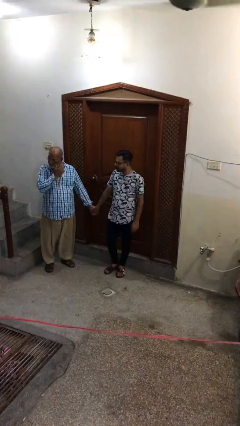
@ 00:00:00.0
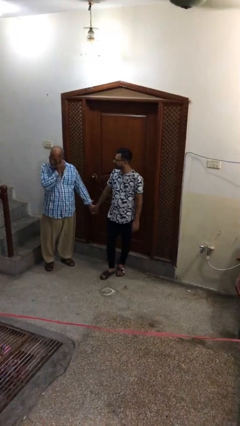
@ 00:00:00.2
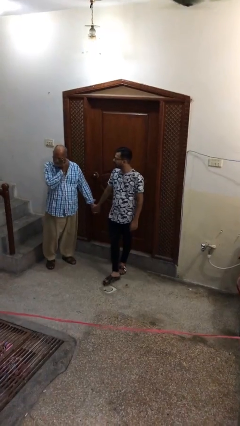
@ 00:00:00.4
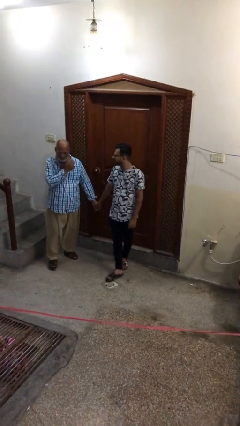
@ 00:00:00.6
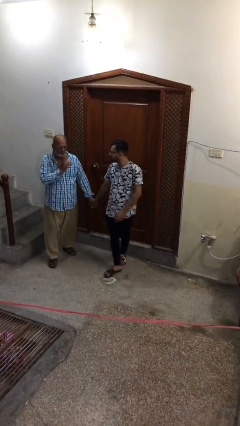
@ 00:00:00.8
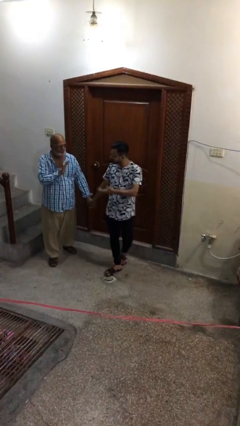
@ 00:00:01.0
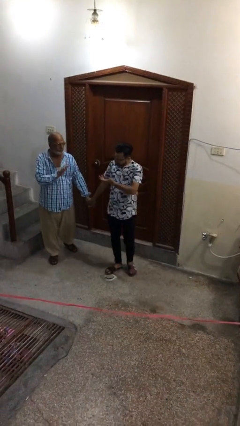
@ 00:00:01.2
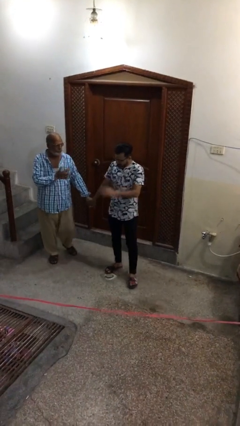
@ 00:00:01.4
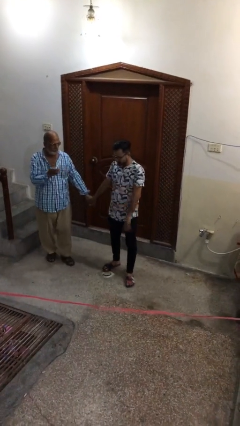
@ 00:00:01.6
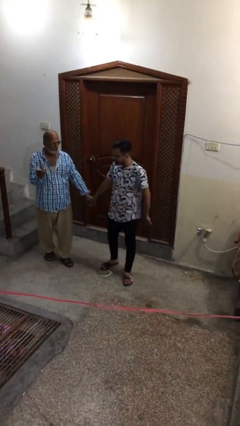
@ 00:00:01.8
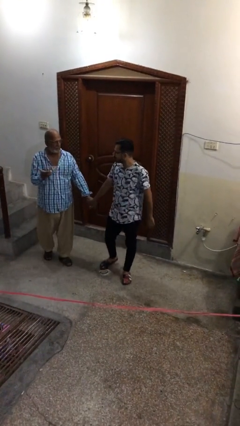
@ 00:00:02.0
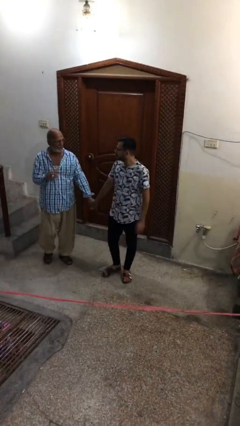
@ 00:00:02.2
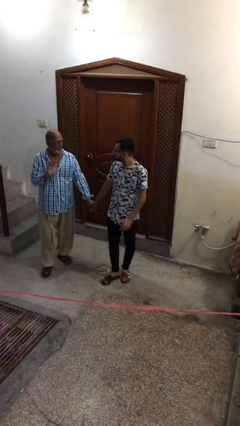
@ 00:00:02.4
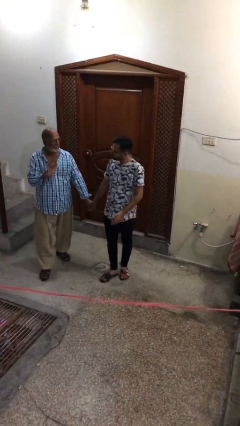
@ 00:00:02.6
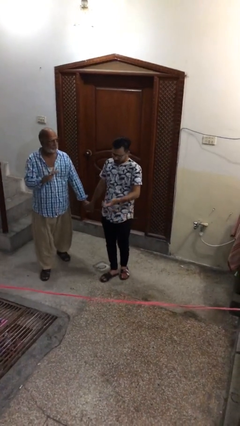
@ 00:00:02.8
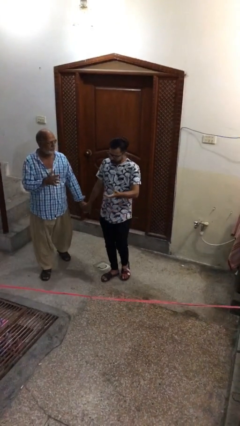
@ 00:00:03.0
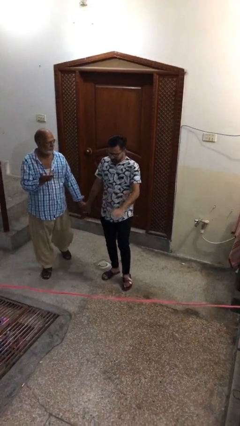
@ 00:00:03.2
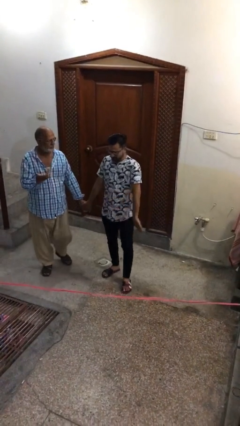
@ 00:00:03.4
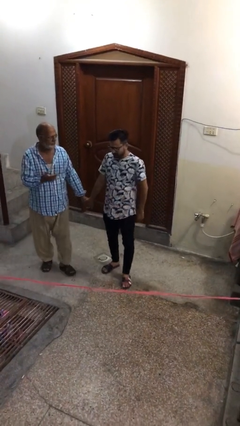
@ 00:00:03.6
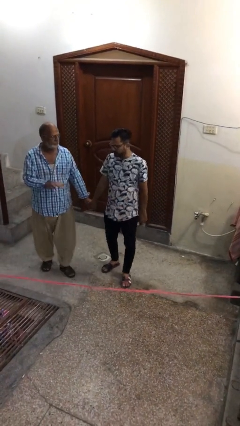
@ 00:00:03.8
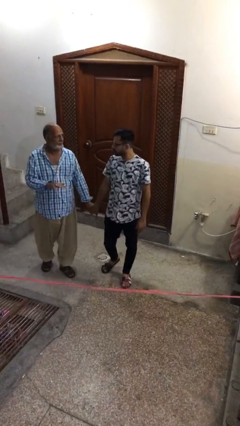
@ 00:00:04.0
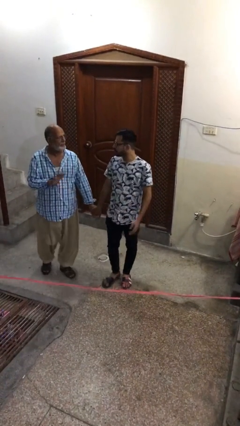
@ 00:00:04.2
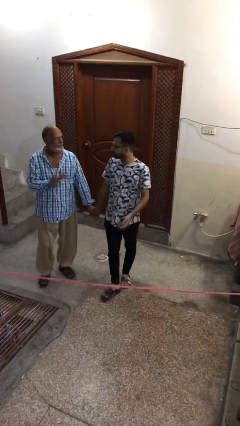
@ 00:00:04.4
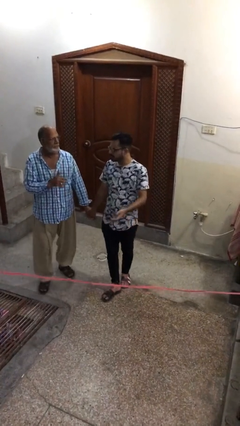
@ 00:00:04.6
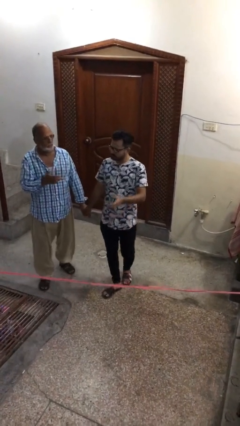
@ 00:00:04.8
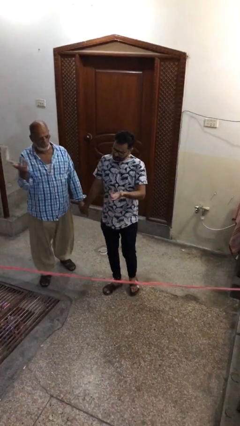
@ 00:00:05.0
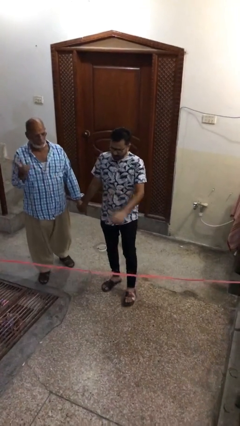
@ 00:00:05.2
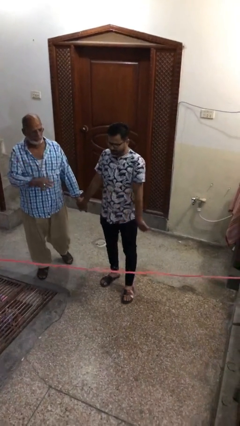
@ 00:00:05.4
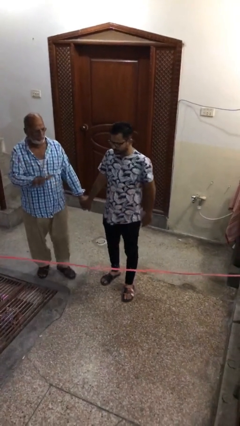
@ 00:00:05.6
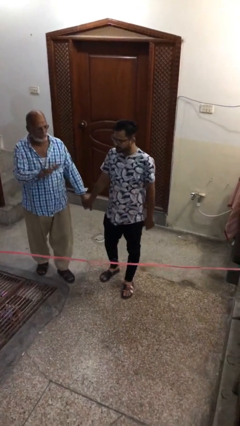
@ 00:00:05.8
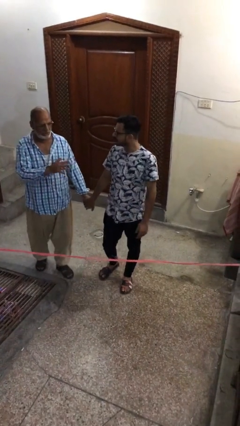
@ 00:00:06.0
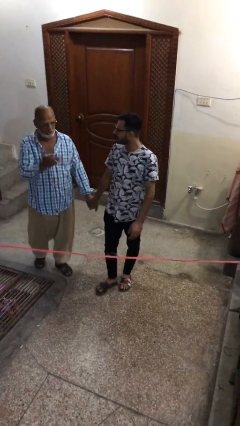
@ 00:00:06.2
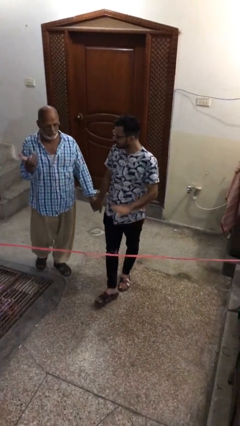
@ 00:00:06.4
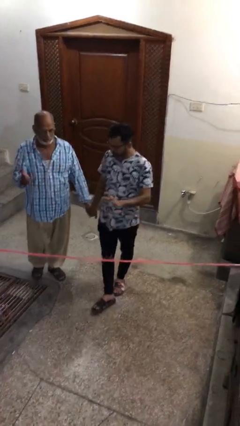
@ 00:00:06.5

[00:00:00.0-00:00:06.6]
person holds hand

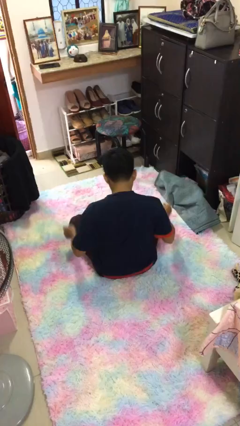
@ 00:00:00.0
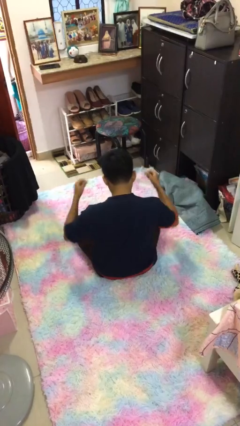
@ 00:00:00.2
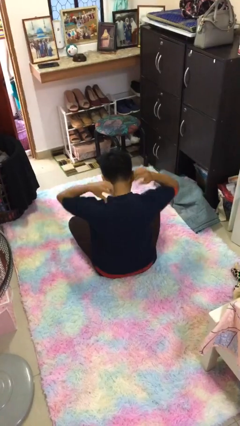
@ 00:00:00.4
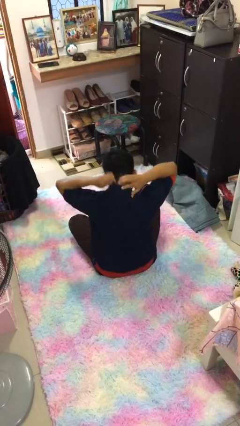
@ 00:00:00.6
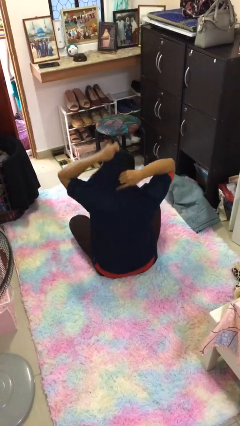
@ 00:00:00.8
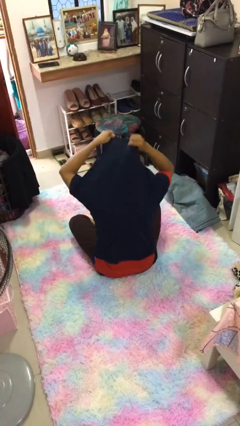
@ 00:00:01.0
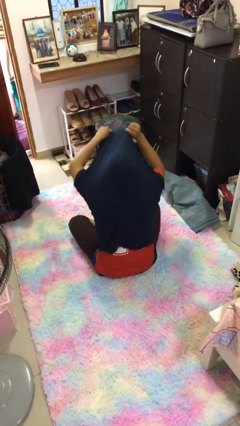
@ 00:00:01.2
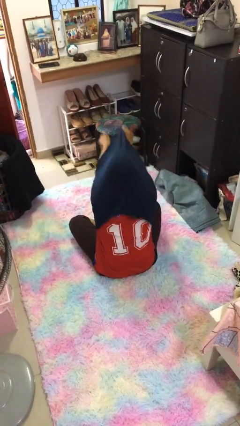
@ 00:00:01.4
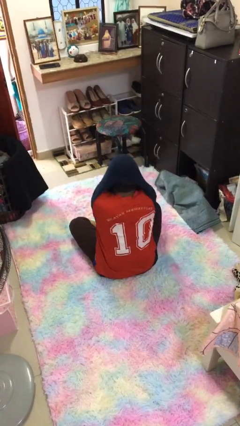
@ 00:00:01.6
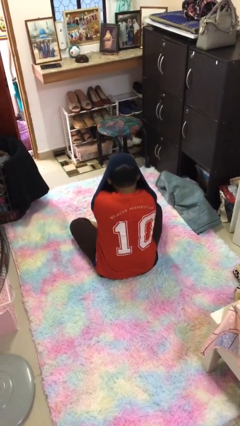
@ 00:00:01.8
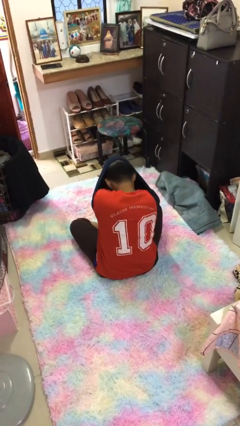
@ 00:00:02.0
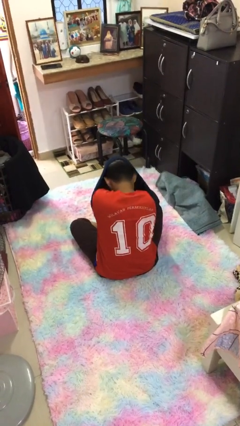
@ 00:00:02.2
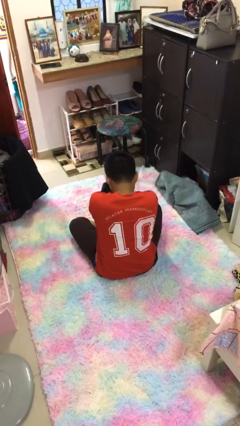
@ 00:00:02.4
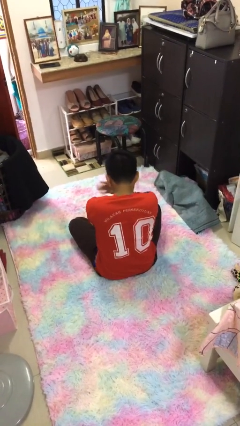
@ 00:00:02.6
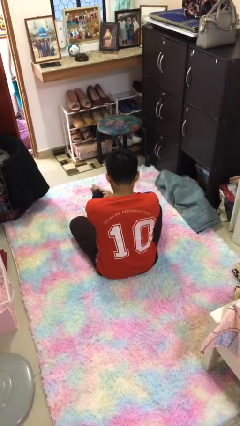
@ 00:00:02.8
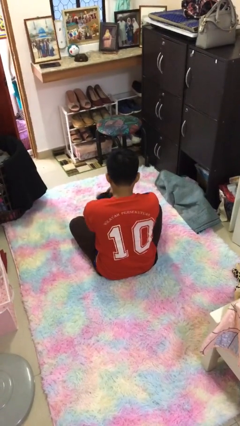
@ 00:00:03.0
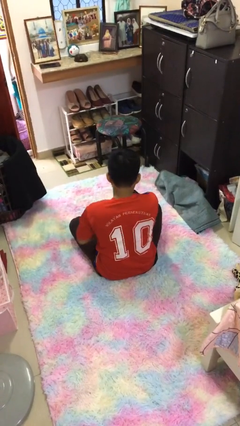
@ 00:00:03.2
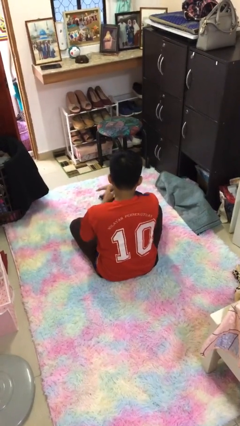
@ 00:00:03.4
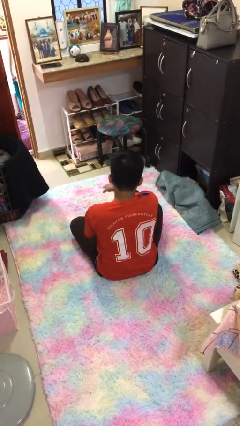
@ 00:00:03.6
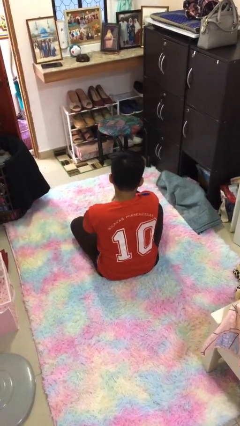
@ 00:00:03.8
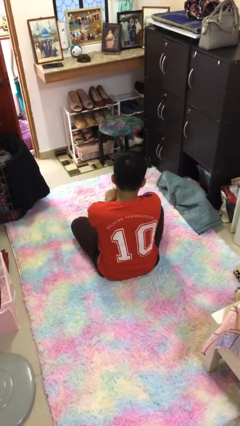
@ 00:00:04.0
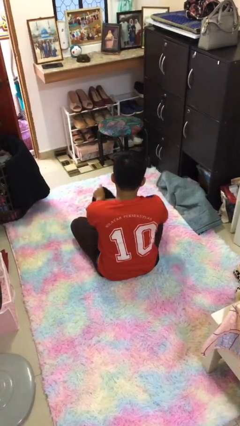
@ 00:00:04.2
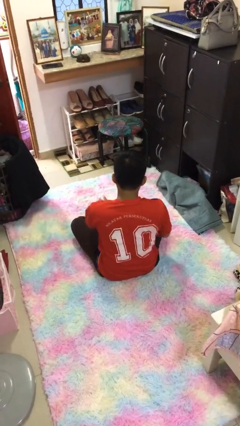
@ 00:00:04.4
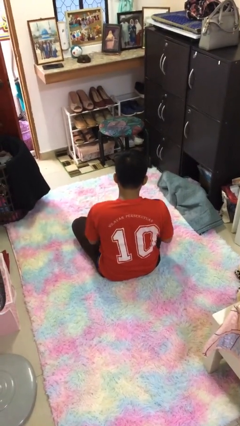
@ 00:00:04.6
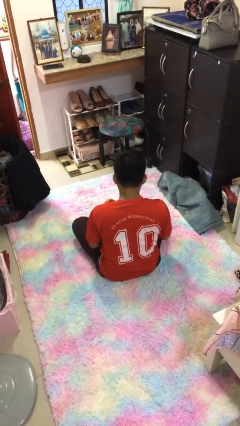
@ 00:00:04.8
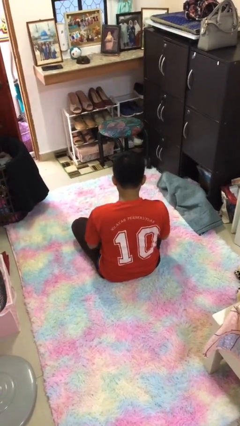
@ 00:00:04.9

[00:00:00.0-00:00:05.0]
person takes off shirt

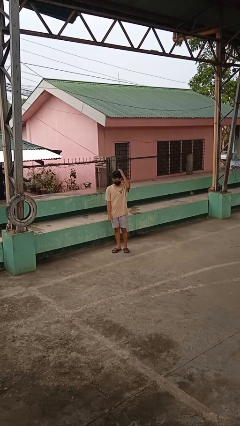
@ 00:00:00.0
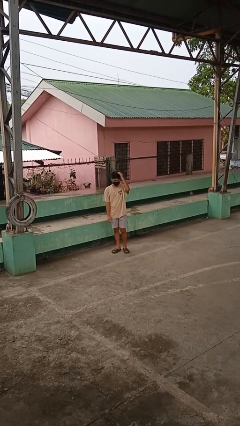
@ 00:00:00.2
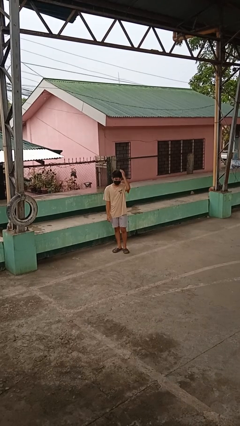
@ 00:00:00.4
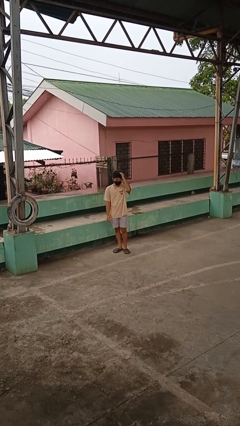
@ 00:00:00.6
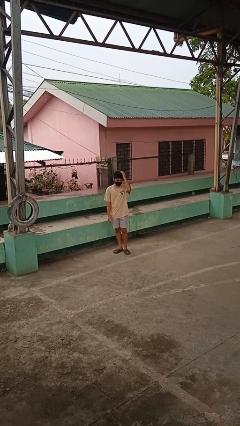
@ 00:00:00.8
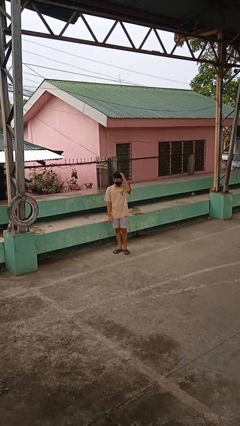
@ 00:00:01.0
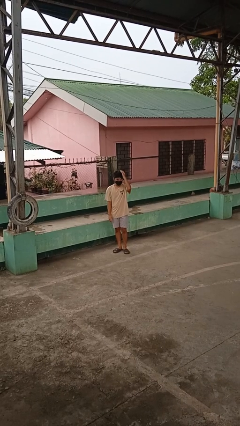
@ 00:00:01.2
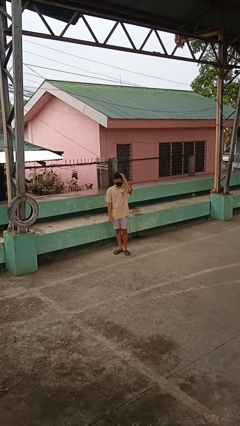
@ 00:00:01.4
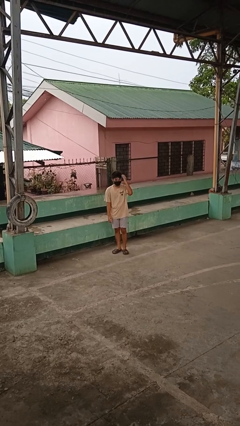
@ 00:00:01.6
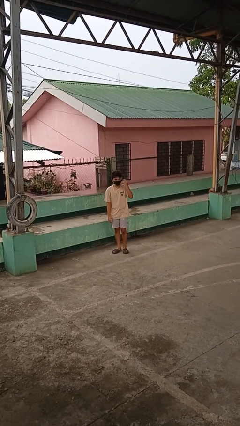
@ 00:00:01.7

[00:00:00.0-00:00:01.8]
person pats head

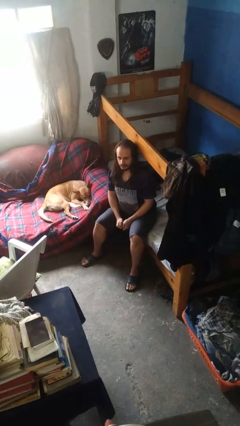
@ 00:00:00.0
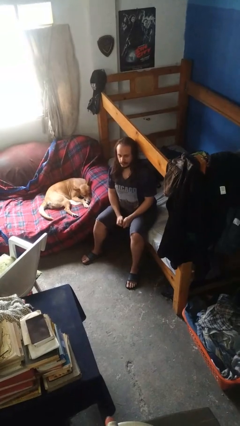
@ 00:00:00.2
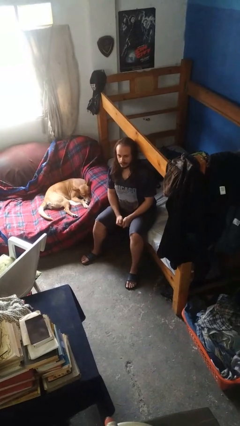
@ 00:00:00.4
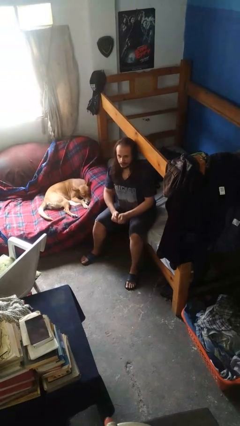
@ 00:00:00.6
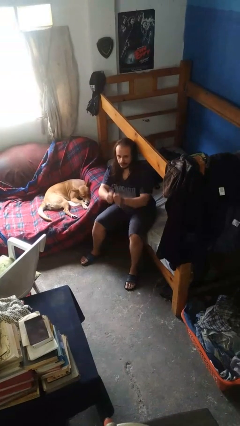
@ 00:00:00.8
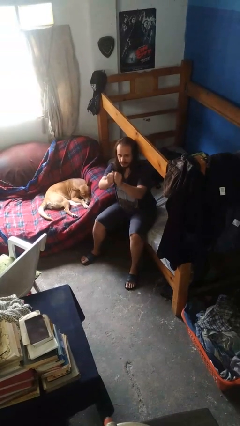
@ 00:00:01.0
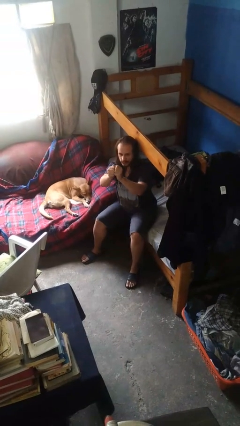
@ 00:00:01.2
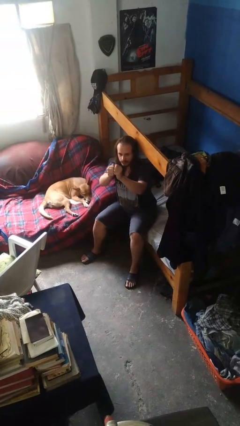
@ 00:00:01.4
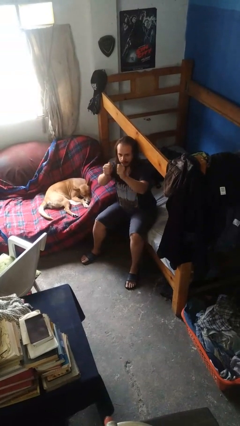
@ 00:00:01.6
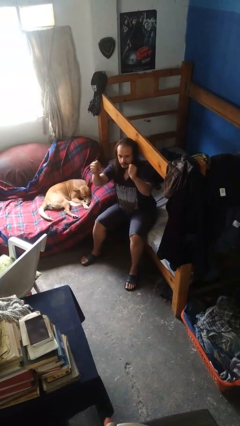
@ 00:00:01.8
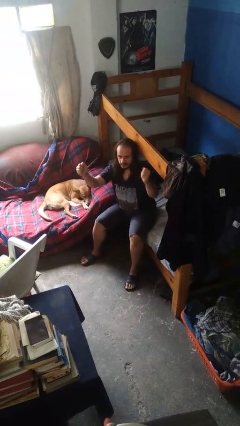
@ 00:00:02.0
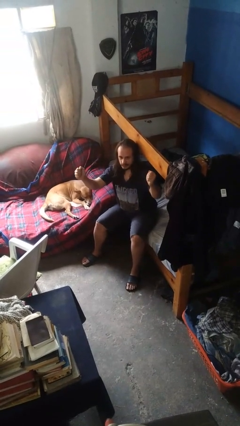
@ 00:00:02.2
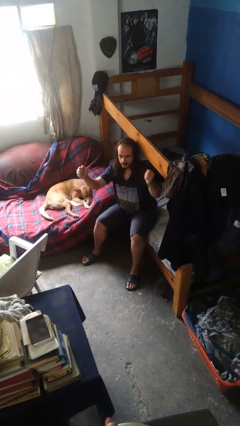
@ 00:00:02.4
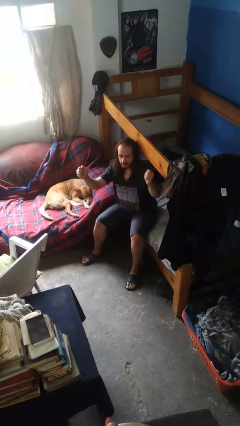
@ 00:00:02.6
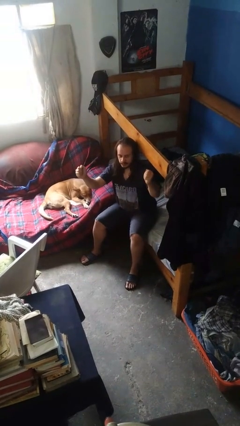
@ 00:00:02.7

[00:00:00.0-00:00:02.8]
person gestures zoom in

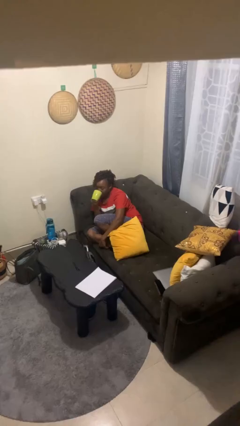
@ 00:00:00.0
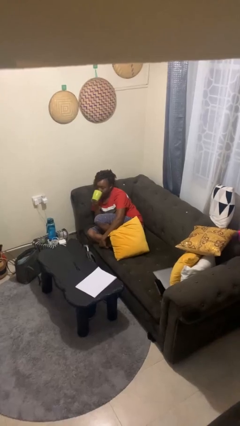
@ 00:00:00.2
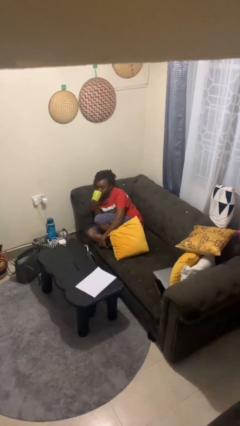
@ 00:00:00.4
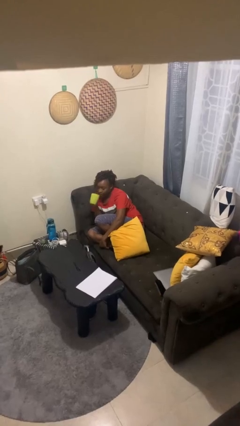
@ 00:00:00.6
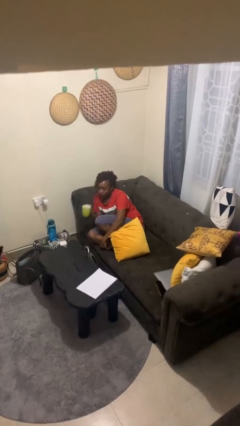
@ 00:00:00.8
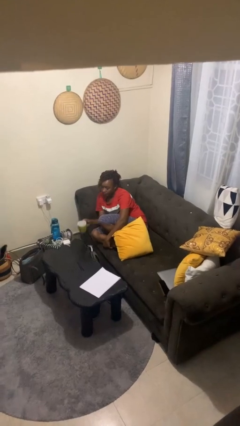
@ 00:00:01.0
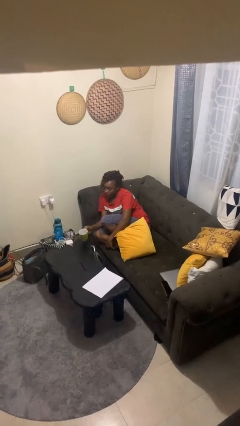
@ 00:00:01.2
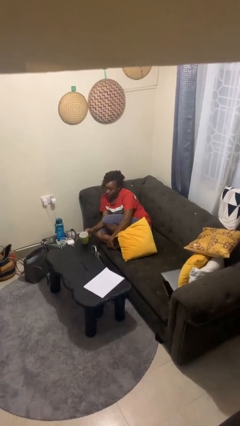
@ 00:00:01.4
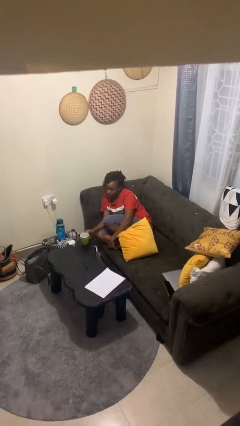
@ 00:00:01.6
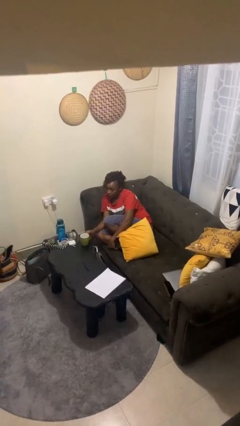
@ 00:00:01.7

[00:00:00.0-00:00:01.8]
person puts down object on table
